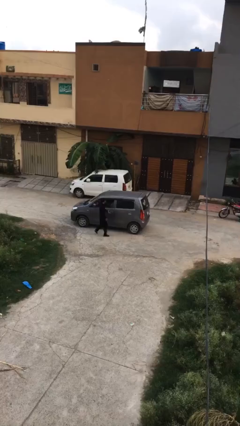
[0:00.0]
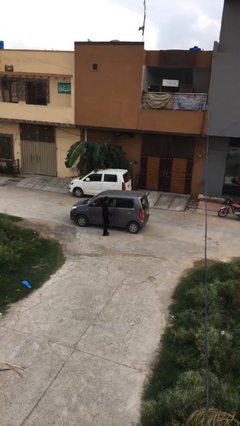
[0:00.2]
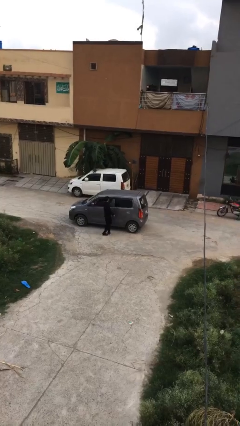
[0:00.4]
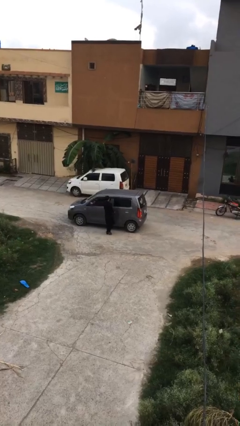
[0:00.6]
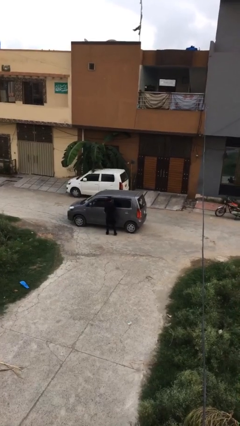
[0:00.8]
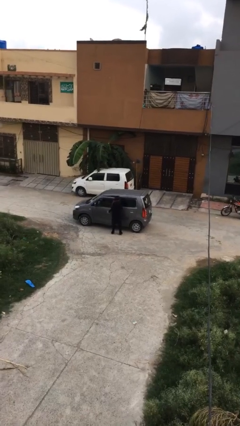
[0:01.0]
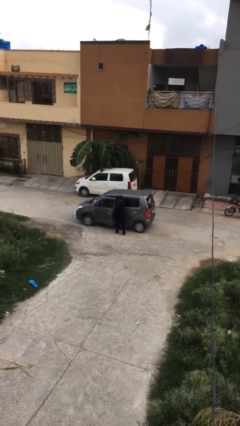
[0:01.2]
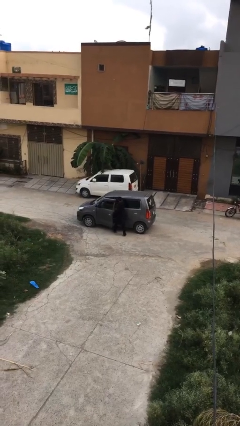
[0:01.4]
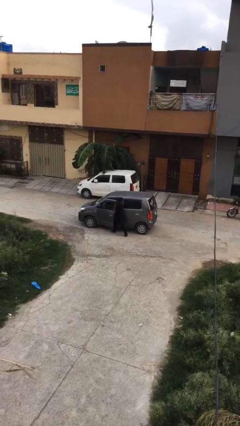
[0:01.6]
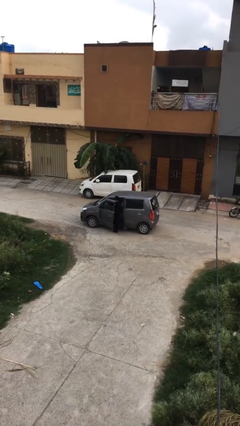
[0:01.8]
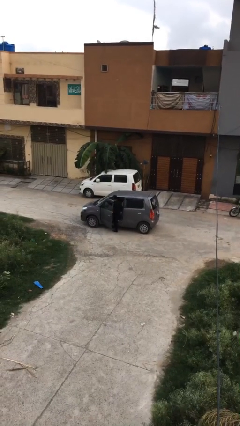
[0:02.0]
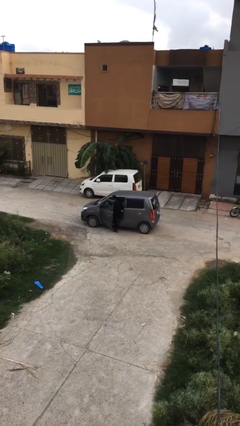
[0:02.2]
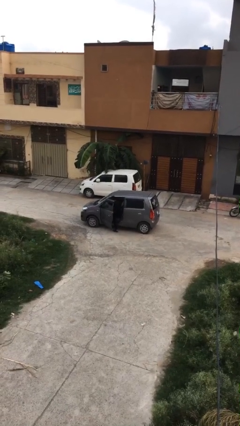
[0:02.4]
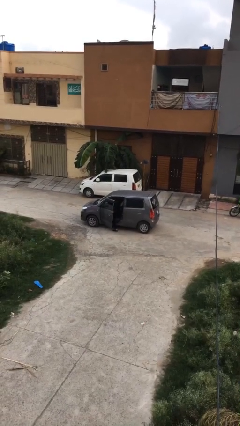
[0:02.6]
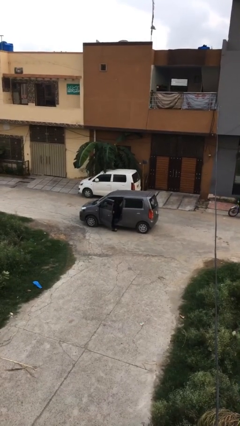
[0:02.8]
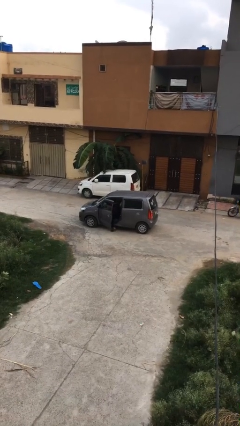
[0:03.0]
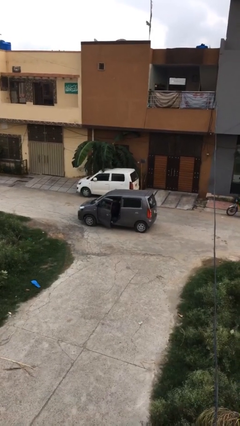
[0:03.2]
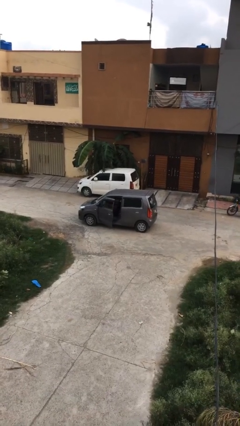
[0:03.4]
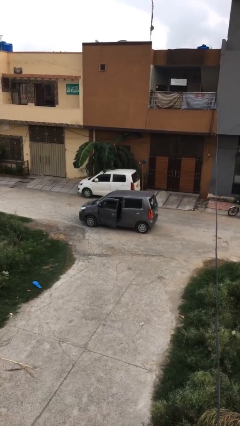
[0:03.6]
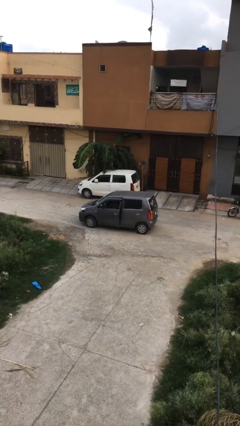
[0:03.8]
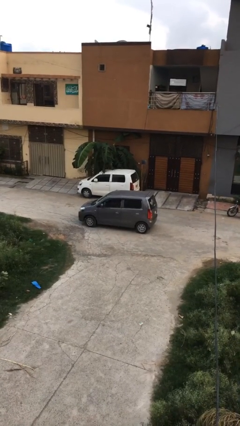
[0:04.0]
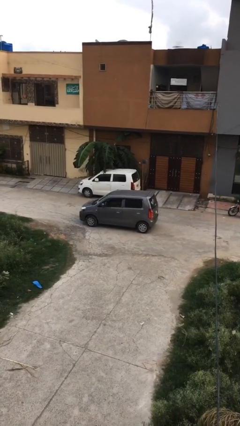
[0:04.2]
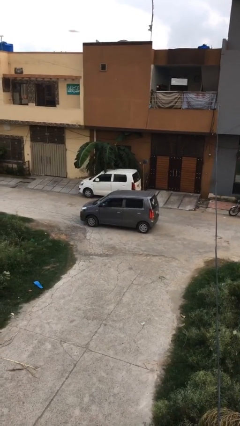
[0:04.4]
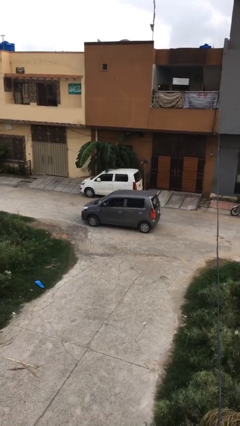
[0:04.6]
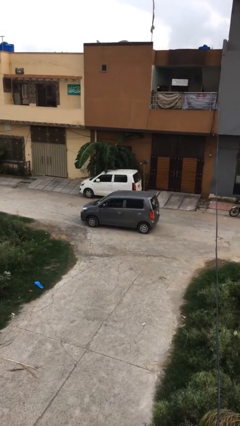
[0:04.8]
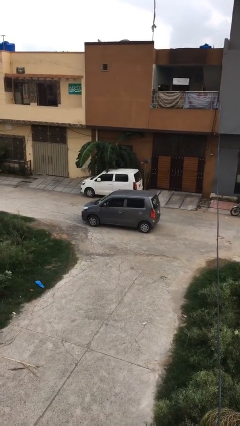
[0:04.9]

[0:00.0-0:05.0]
car picks up person

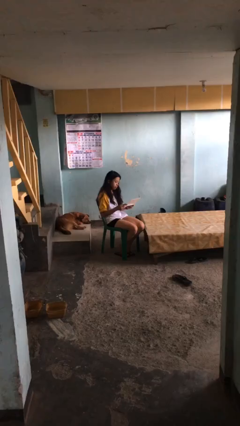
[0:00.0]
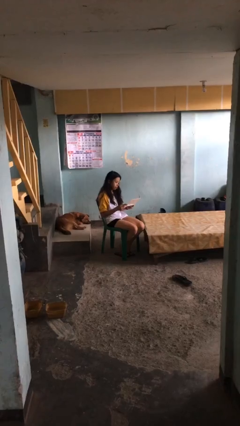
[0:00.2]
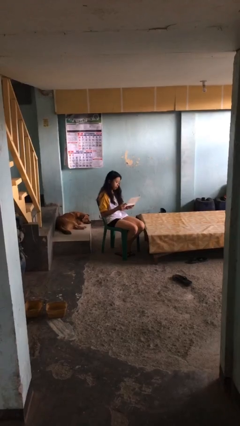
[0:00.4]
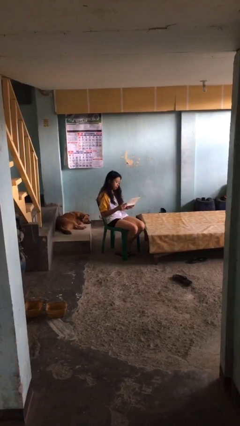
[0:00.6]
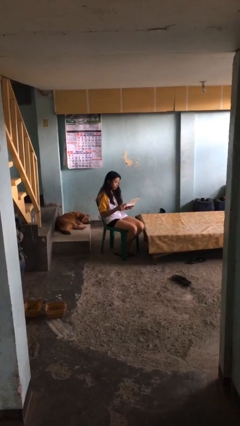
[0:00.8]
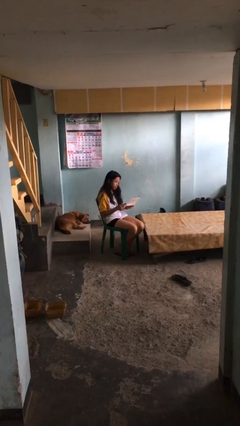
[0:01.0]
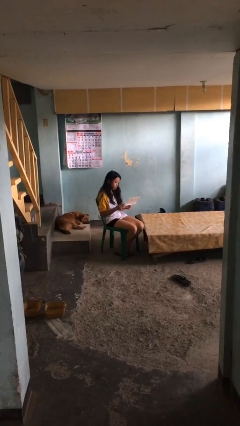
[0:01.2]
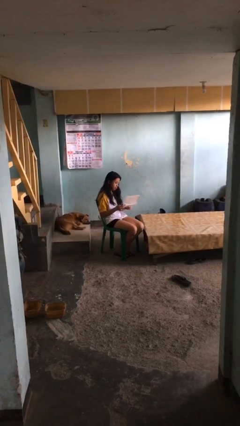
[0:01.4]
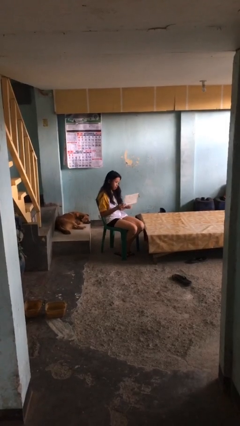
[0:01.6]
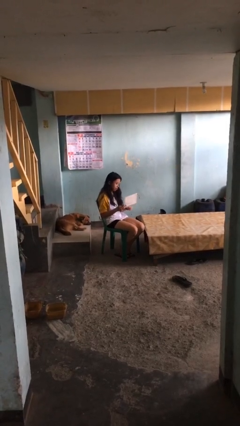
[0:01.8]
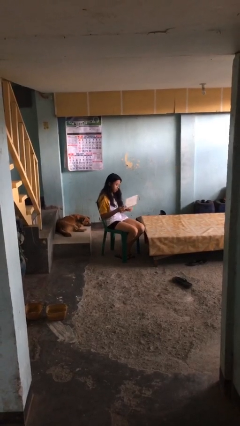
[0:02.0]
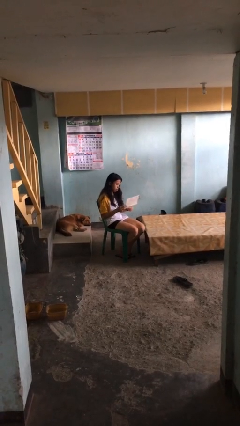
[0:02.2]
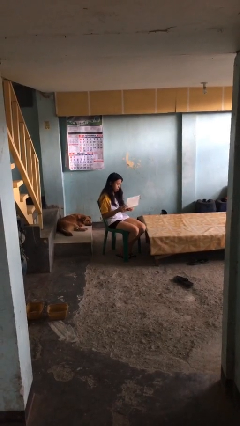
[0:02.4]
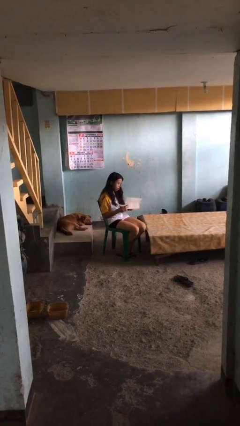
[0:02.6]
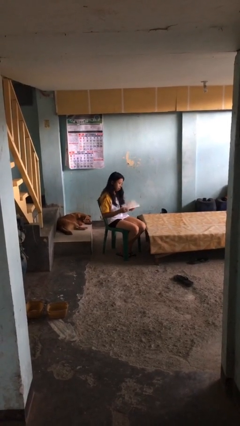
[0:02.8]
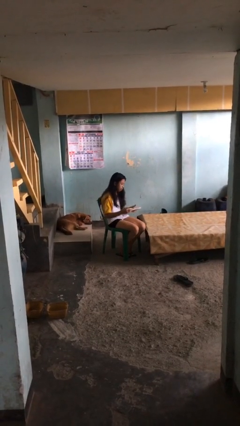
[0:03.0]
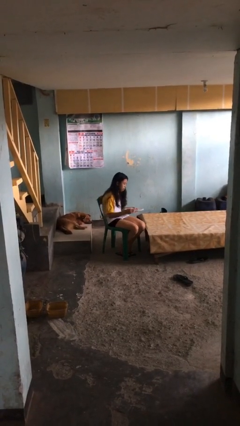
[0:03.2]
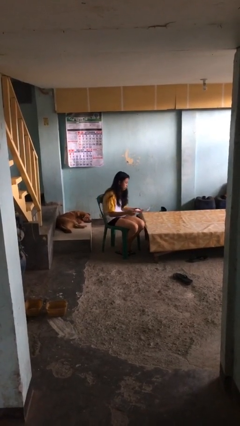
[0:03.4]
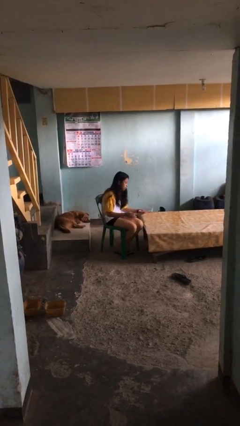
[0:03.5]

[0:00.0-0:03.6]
person reads document

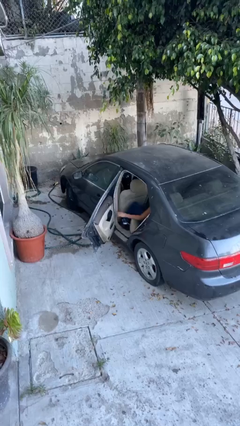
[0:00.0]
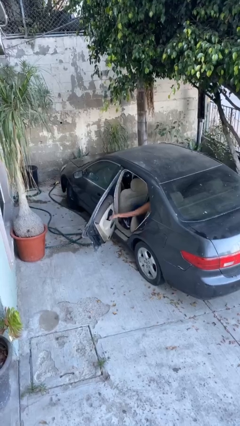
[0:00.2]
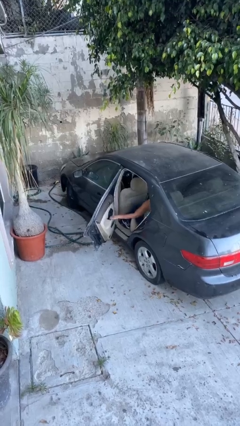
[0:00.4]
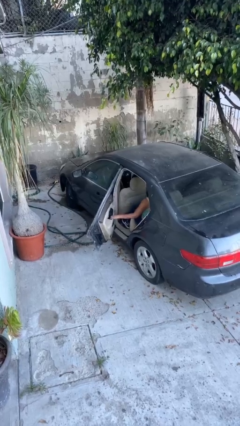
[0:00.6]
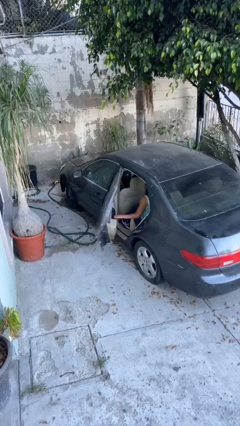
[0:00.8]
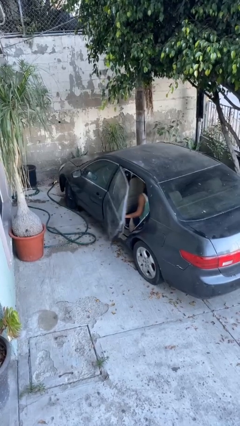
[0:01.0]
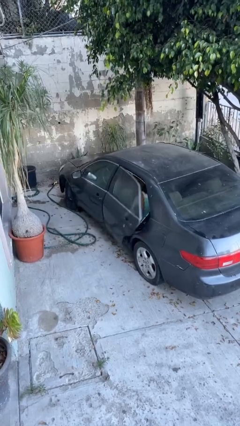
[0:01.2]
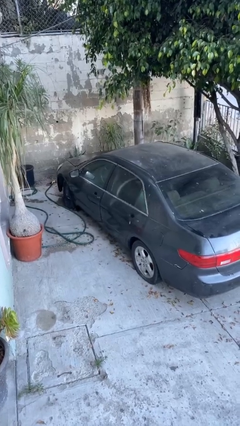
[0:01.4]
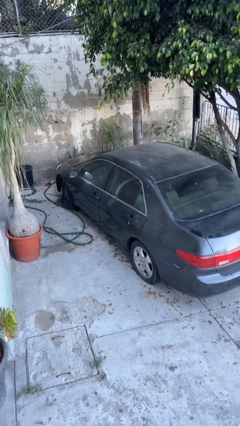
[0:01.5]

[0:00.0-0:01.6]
person closes car door

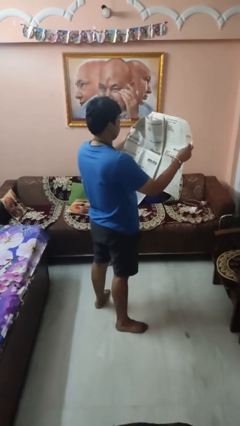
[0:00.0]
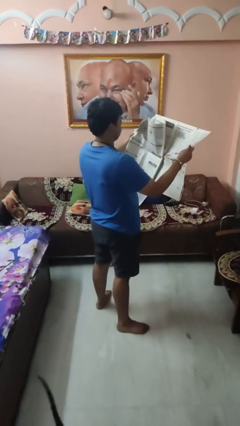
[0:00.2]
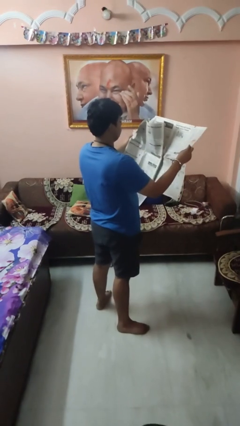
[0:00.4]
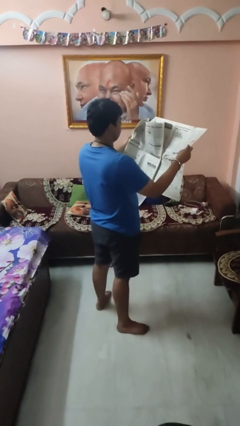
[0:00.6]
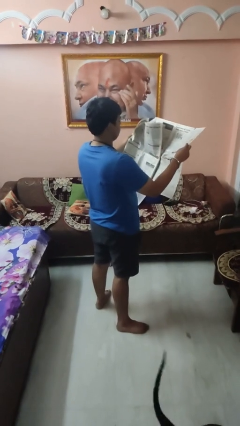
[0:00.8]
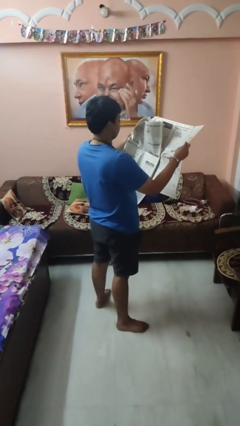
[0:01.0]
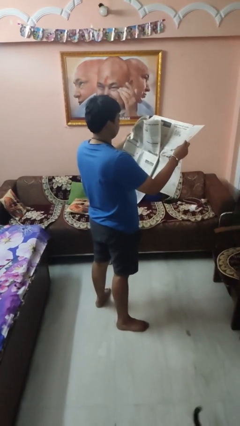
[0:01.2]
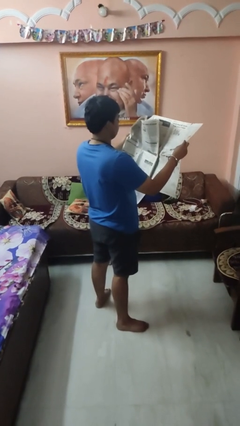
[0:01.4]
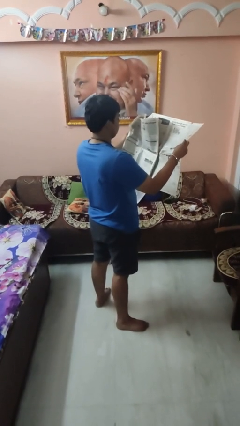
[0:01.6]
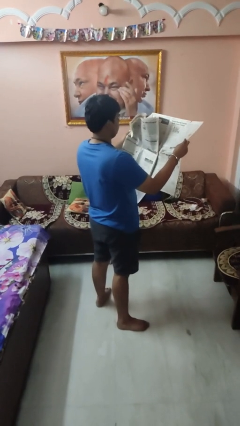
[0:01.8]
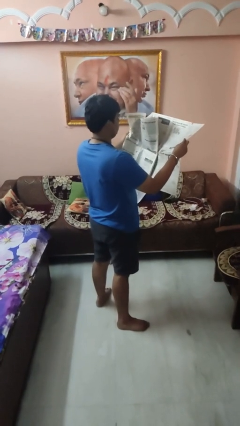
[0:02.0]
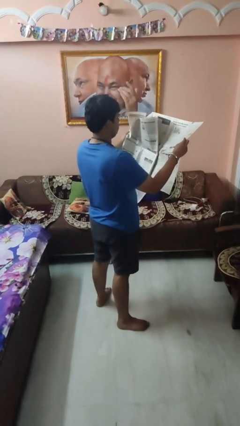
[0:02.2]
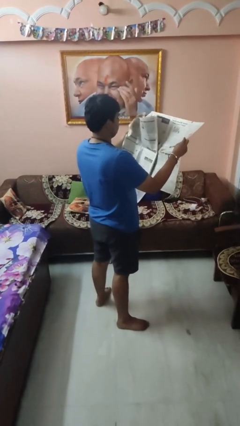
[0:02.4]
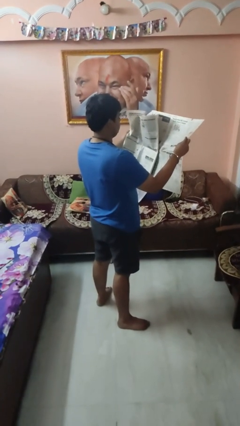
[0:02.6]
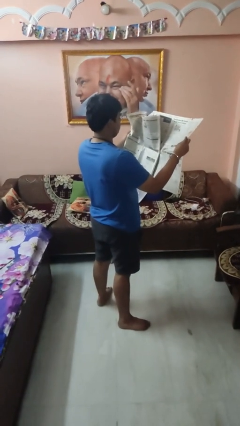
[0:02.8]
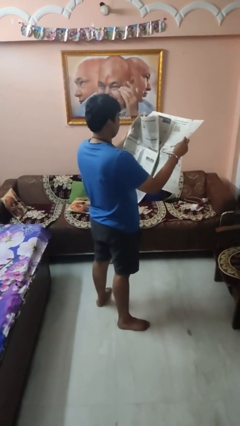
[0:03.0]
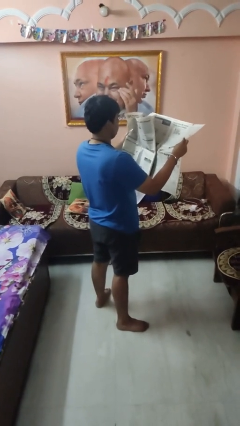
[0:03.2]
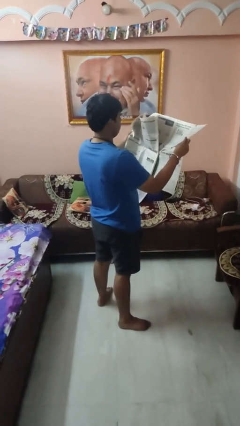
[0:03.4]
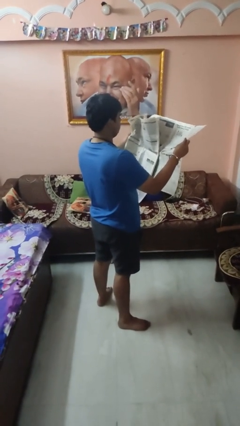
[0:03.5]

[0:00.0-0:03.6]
person reads newspaper

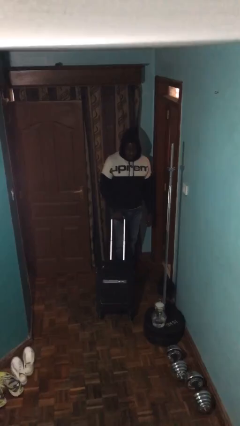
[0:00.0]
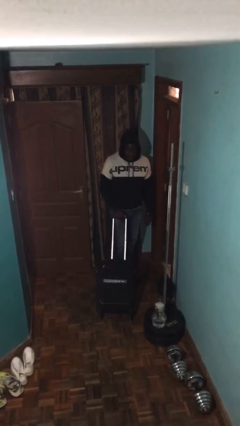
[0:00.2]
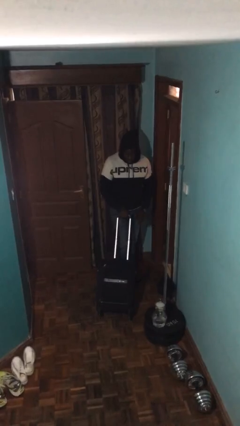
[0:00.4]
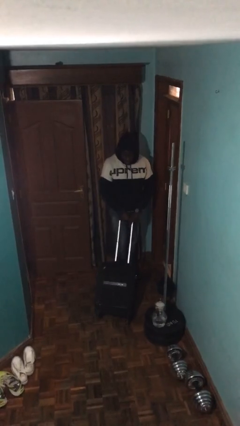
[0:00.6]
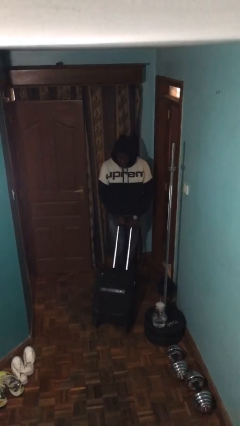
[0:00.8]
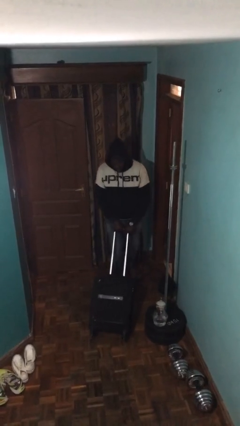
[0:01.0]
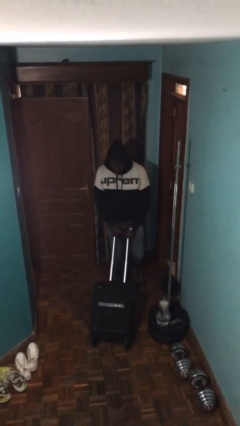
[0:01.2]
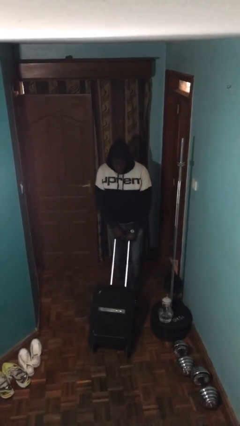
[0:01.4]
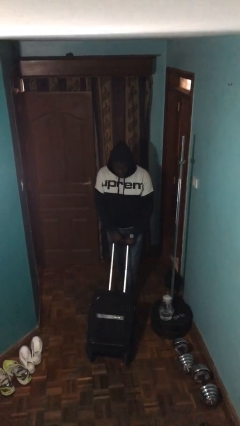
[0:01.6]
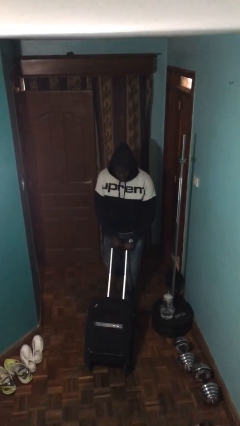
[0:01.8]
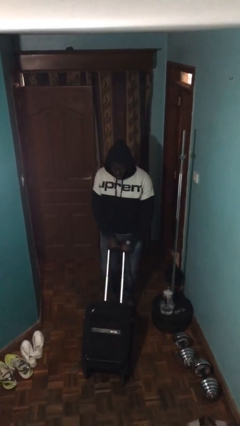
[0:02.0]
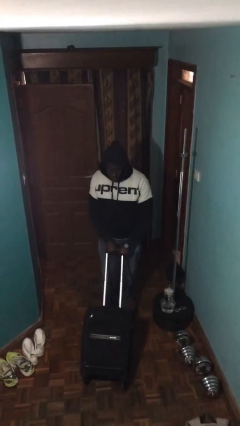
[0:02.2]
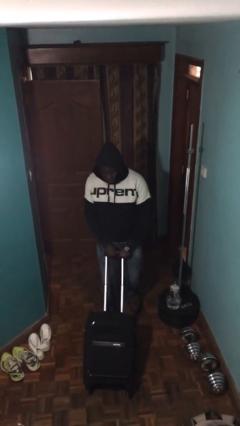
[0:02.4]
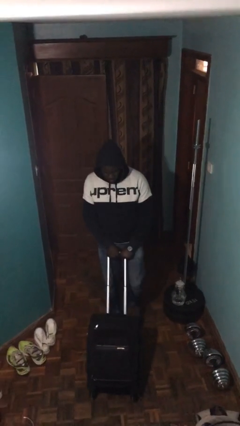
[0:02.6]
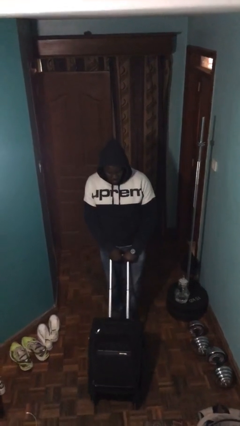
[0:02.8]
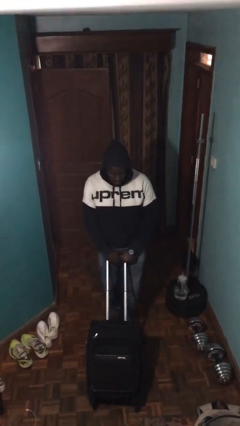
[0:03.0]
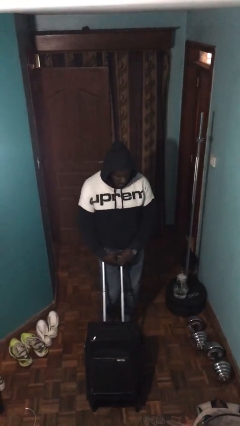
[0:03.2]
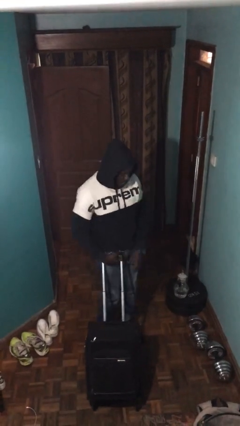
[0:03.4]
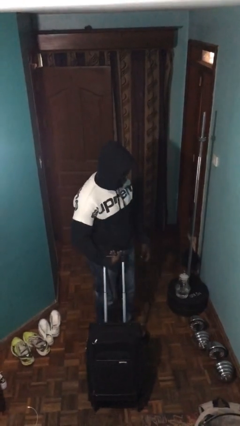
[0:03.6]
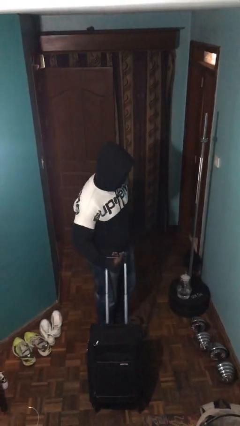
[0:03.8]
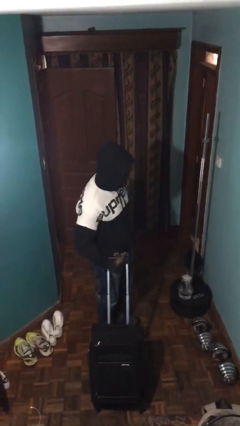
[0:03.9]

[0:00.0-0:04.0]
person pushes wheeled cart
